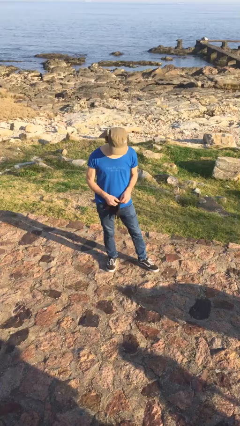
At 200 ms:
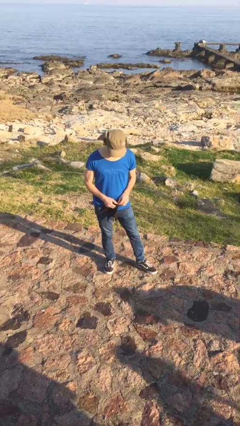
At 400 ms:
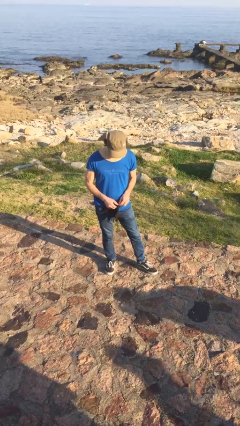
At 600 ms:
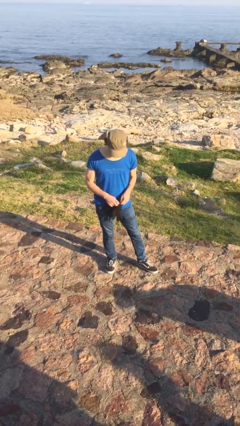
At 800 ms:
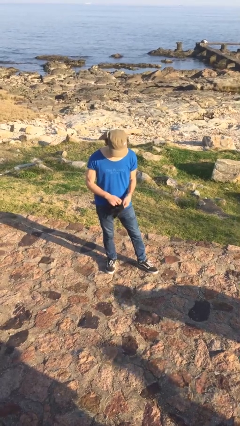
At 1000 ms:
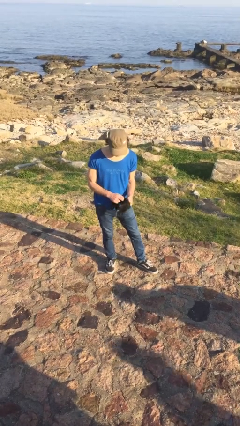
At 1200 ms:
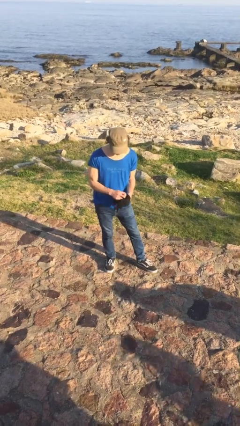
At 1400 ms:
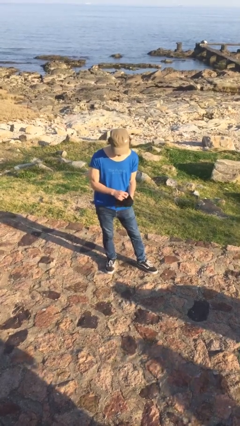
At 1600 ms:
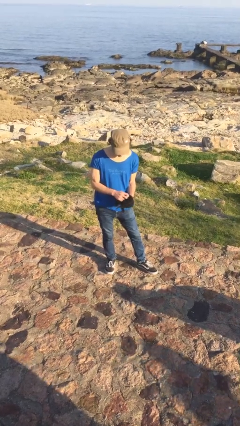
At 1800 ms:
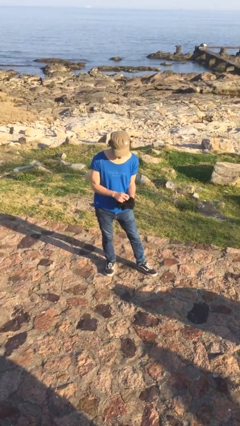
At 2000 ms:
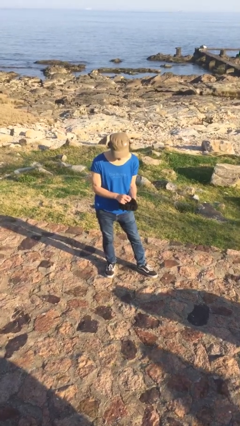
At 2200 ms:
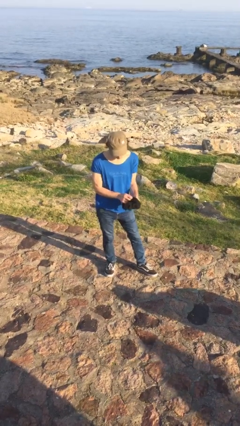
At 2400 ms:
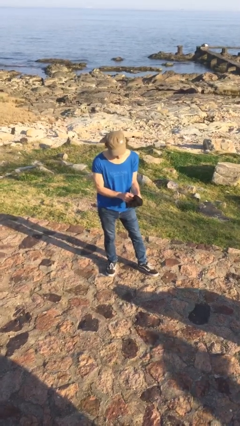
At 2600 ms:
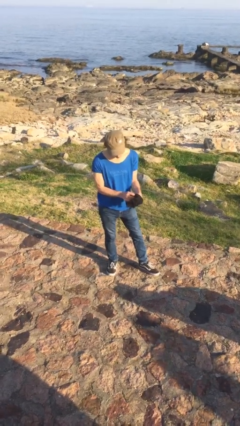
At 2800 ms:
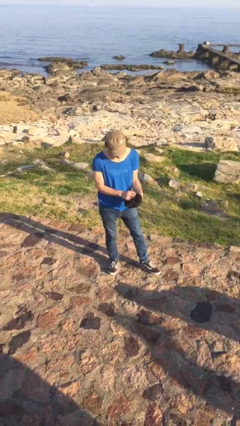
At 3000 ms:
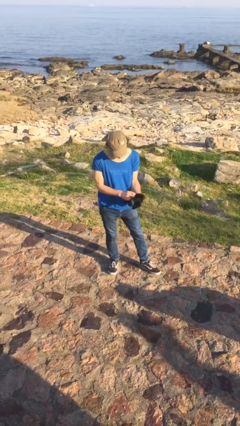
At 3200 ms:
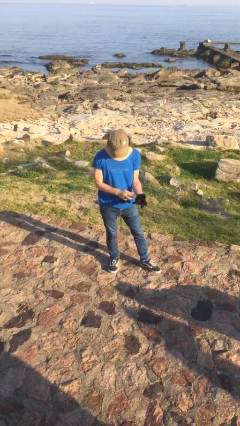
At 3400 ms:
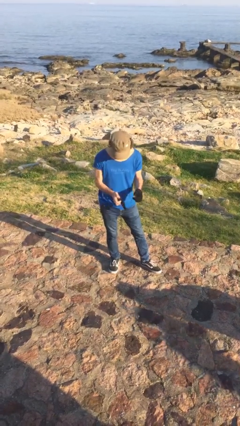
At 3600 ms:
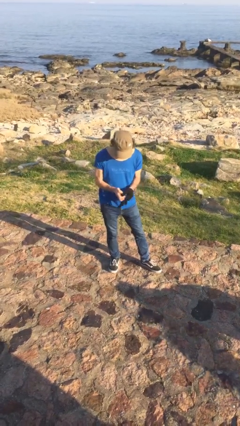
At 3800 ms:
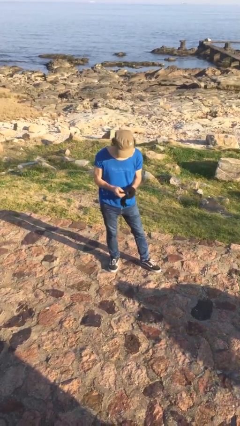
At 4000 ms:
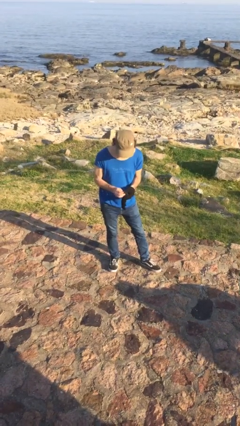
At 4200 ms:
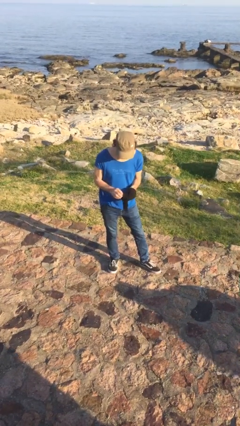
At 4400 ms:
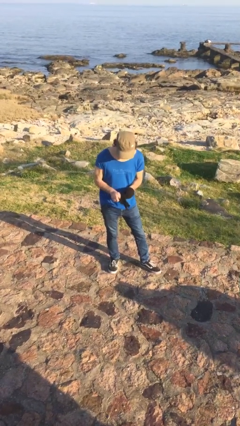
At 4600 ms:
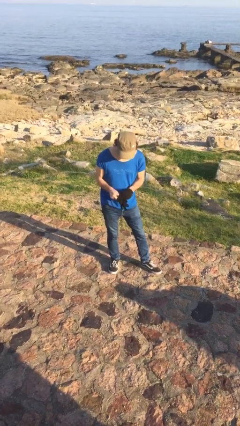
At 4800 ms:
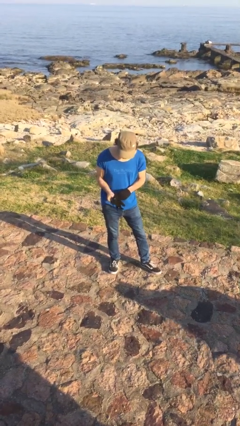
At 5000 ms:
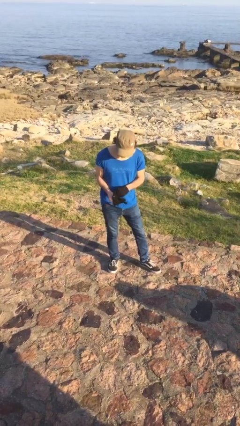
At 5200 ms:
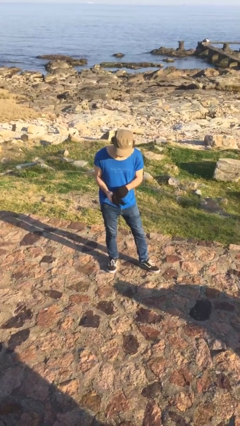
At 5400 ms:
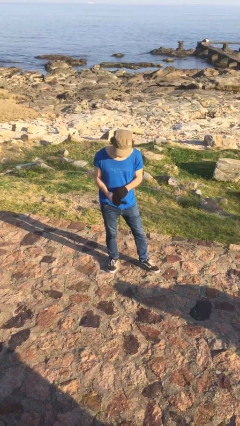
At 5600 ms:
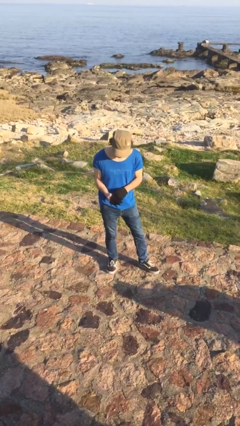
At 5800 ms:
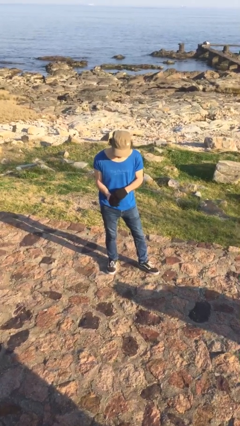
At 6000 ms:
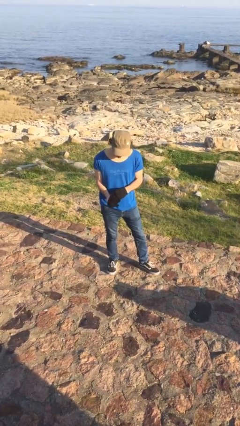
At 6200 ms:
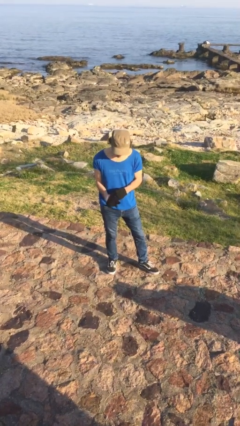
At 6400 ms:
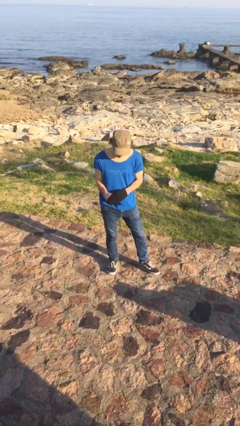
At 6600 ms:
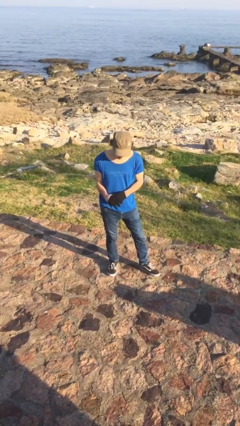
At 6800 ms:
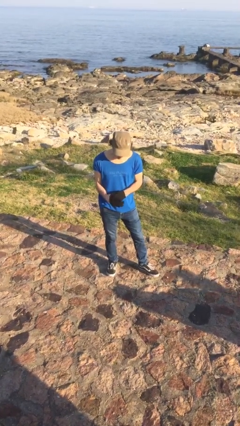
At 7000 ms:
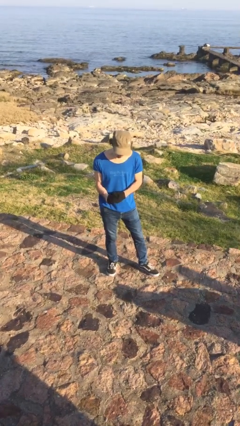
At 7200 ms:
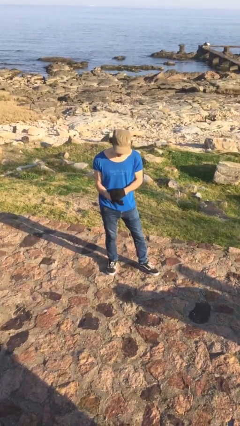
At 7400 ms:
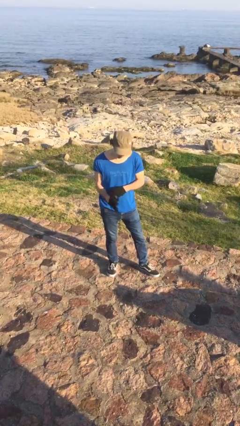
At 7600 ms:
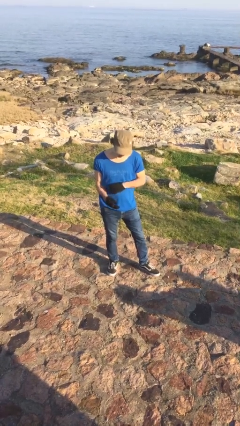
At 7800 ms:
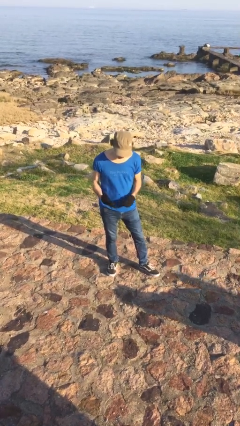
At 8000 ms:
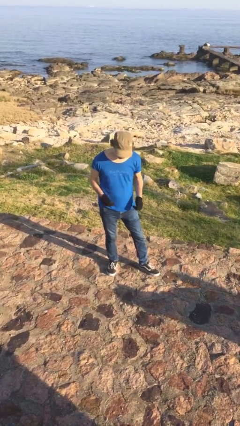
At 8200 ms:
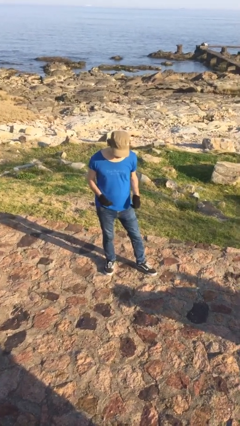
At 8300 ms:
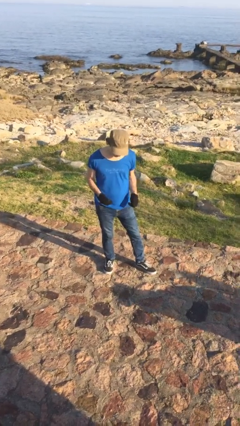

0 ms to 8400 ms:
person puts on gloves

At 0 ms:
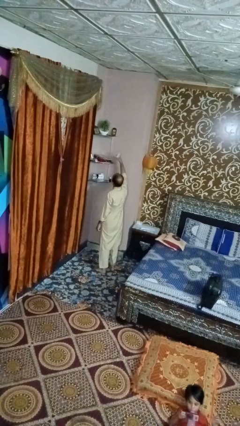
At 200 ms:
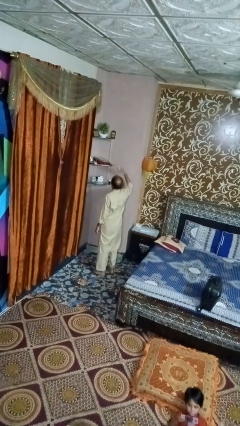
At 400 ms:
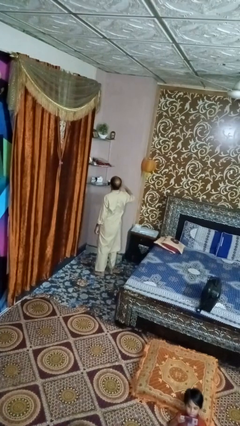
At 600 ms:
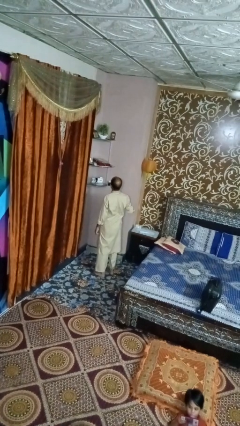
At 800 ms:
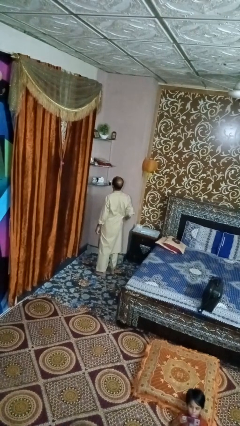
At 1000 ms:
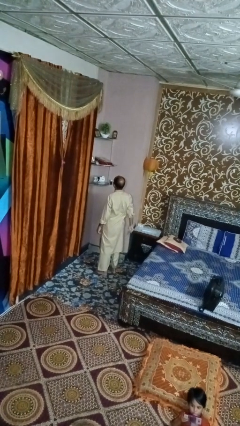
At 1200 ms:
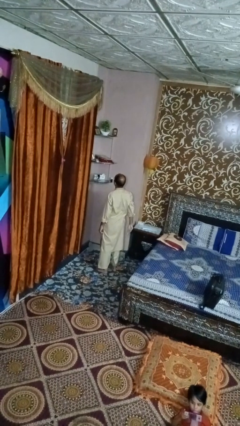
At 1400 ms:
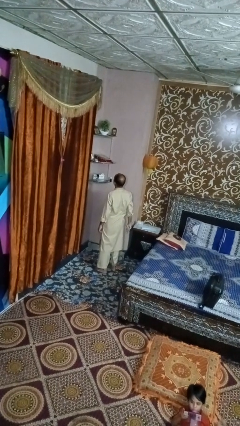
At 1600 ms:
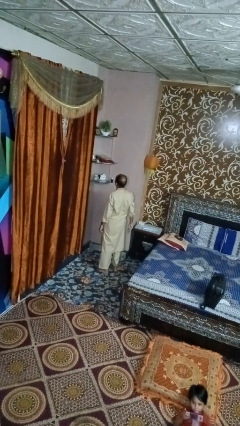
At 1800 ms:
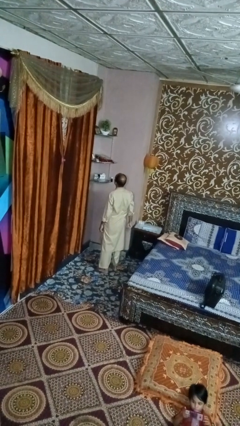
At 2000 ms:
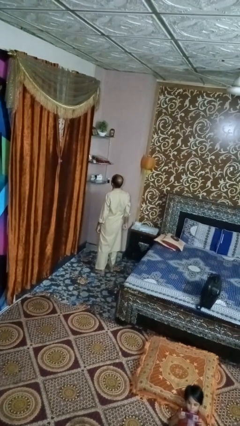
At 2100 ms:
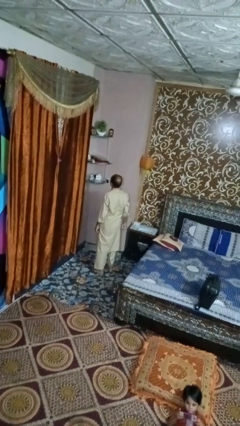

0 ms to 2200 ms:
person puts down object on shelf

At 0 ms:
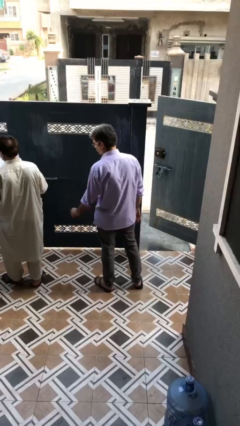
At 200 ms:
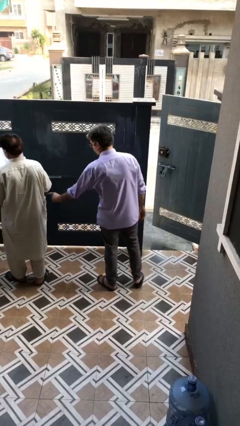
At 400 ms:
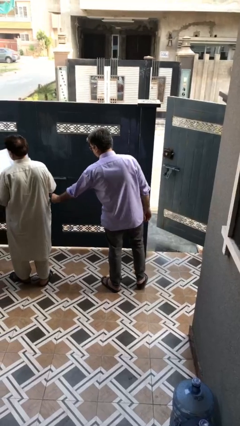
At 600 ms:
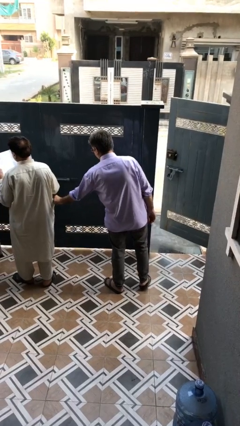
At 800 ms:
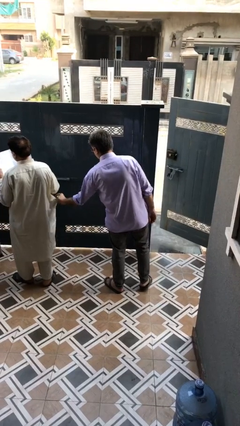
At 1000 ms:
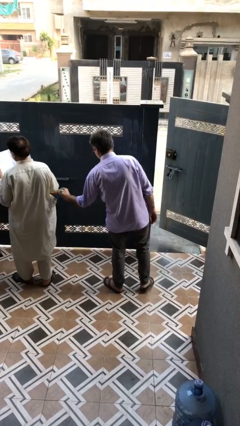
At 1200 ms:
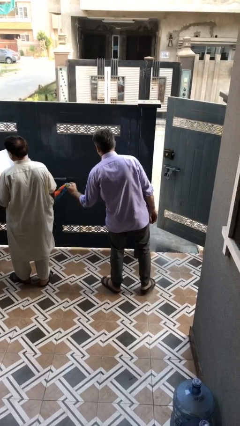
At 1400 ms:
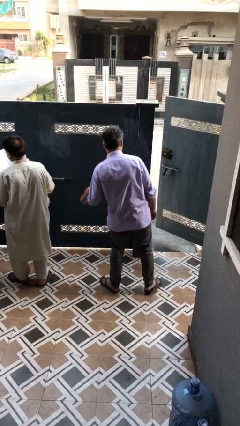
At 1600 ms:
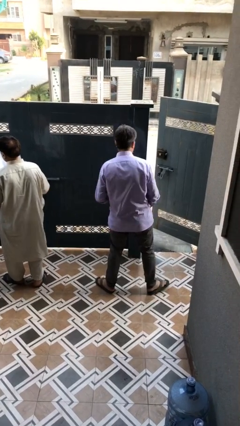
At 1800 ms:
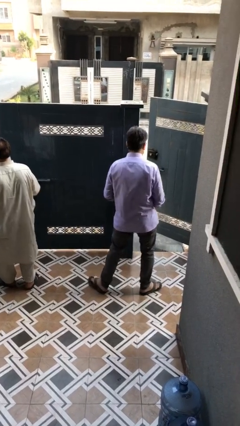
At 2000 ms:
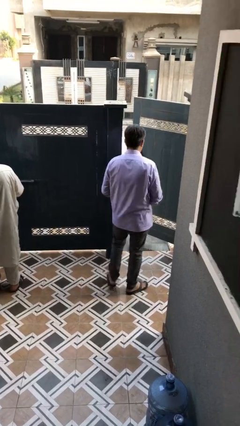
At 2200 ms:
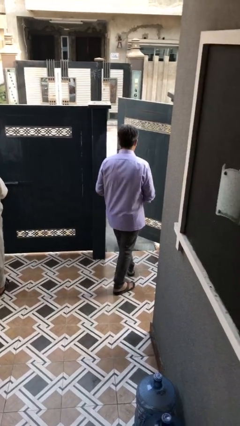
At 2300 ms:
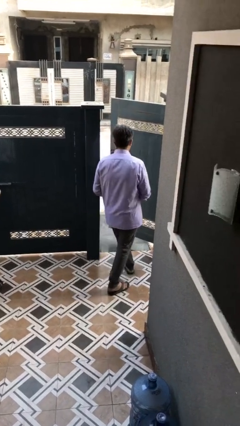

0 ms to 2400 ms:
person steals object from person

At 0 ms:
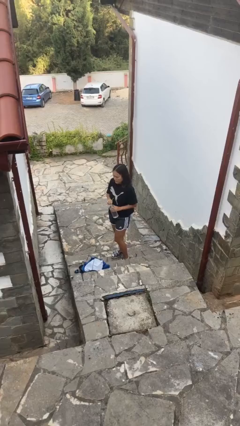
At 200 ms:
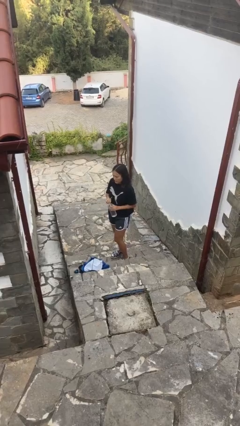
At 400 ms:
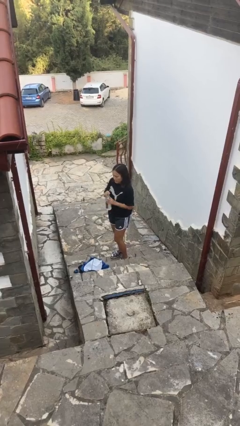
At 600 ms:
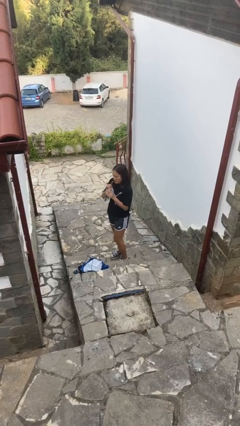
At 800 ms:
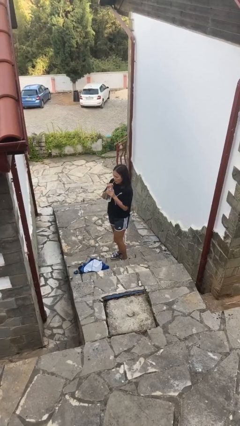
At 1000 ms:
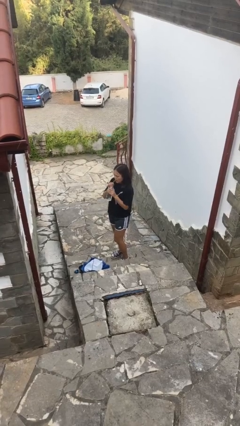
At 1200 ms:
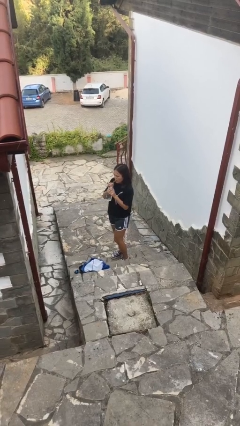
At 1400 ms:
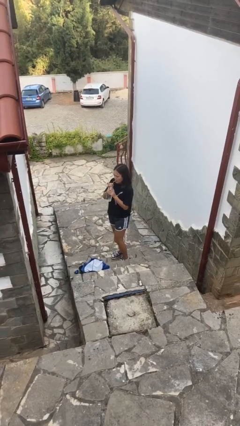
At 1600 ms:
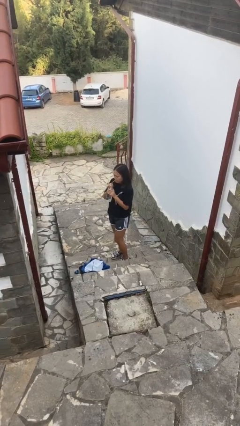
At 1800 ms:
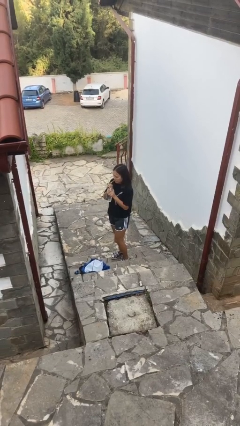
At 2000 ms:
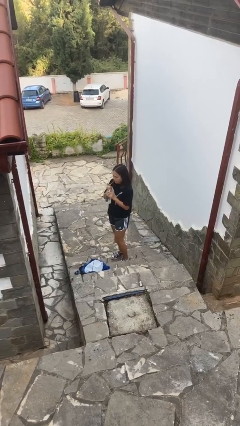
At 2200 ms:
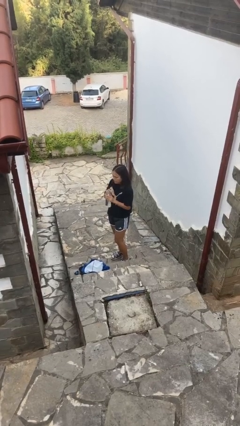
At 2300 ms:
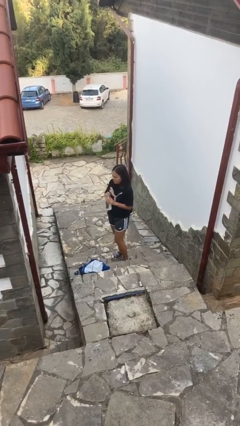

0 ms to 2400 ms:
person drinks from straw

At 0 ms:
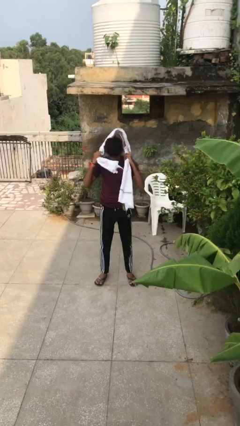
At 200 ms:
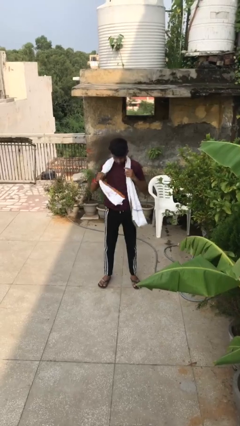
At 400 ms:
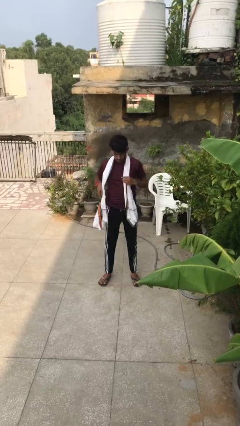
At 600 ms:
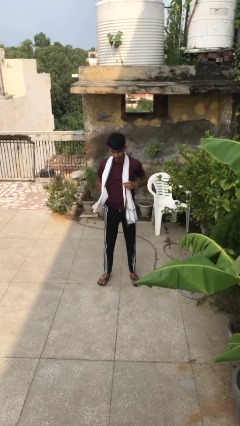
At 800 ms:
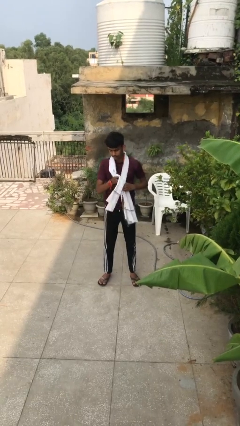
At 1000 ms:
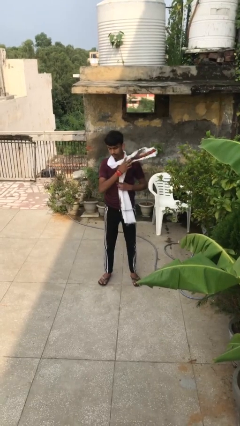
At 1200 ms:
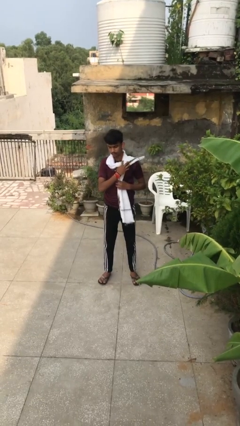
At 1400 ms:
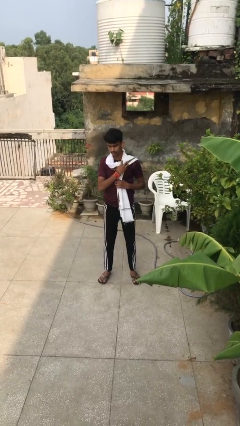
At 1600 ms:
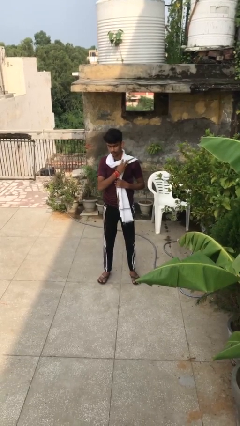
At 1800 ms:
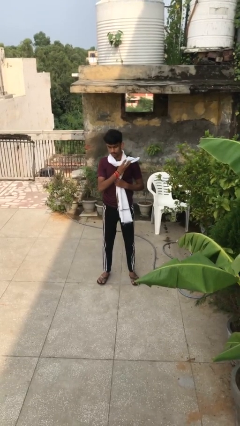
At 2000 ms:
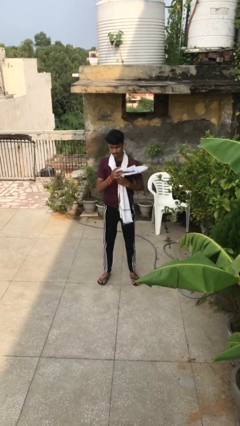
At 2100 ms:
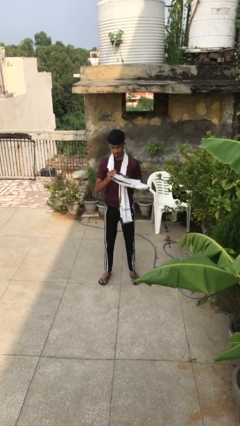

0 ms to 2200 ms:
person puts on shoes
